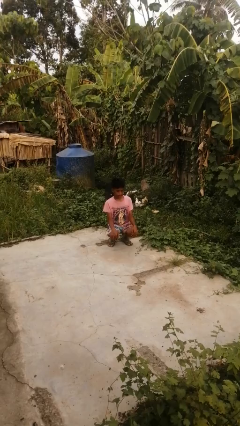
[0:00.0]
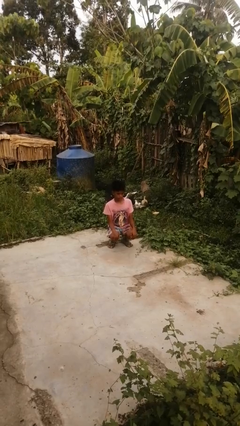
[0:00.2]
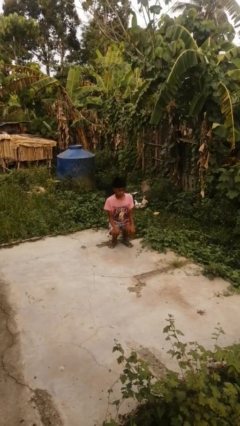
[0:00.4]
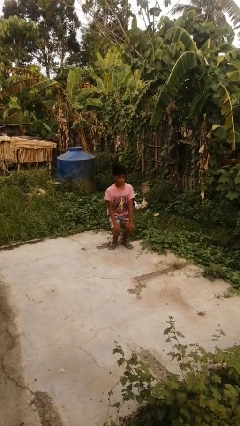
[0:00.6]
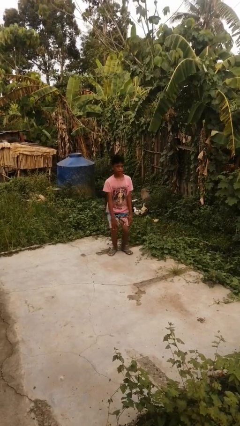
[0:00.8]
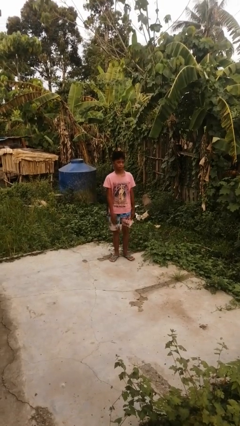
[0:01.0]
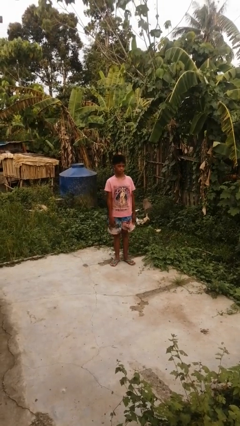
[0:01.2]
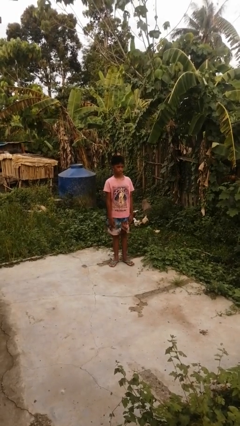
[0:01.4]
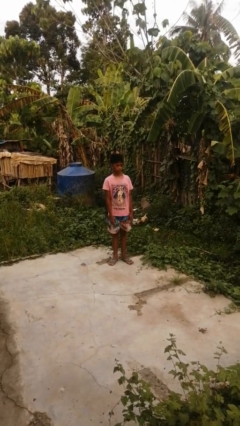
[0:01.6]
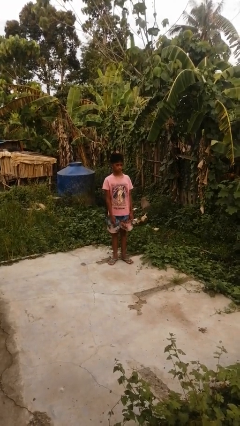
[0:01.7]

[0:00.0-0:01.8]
person stands up

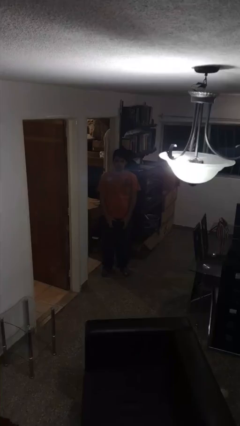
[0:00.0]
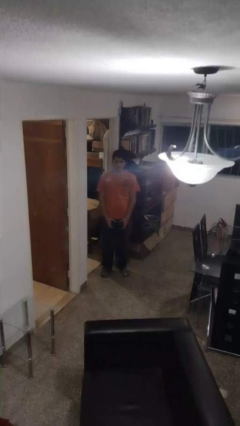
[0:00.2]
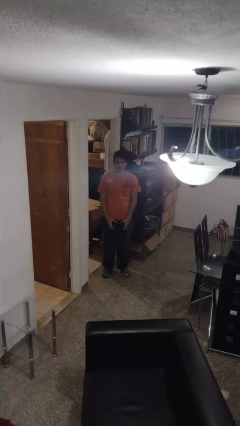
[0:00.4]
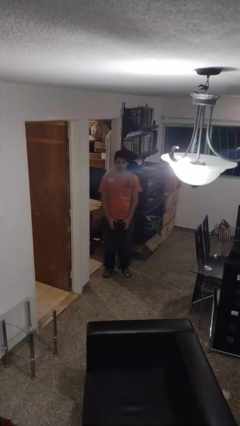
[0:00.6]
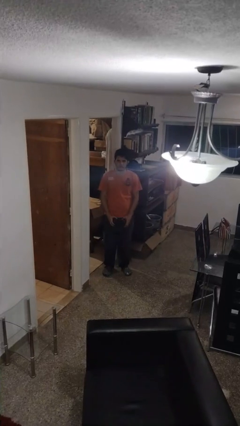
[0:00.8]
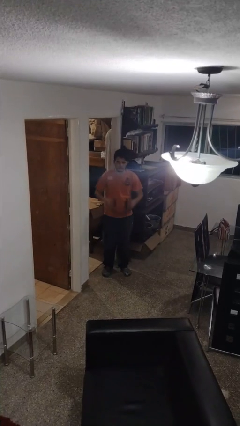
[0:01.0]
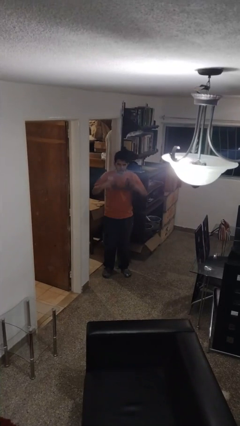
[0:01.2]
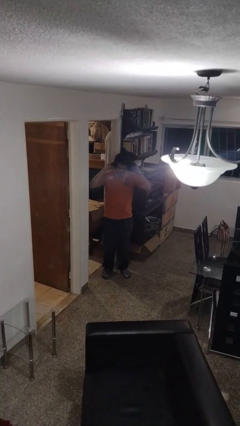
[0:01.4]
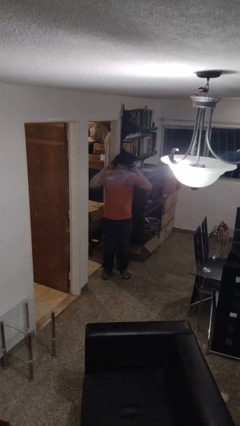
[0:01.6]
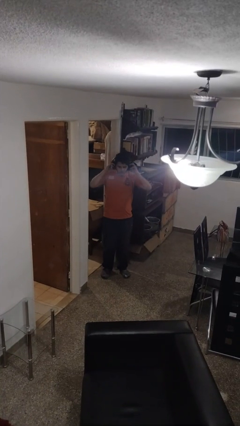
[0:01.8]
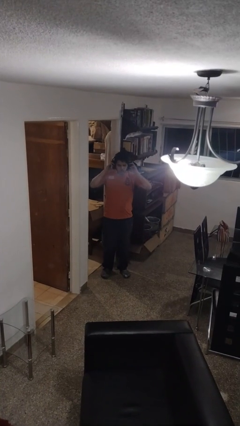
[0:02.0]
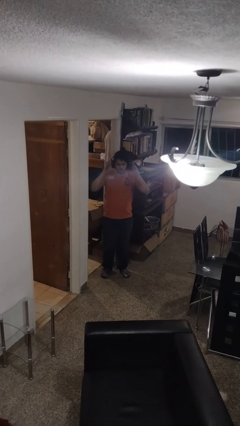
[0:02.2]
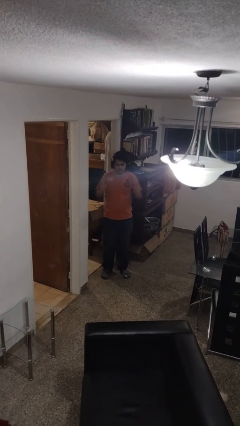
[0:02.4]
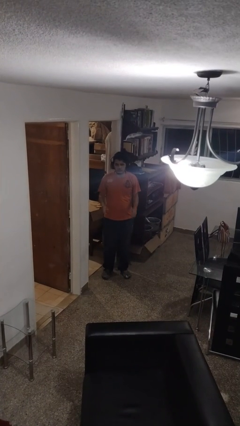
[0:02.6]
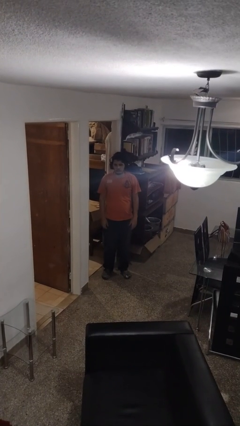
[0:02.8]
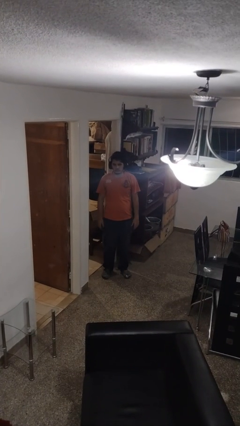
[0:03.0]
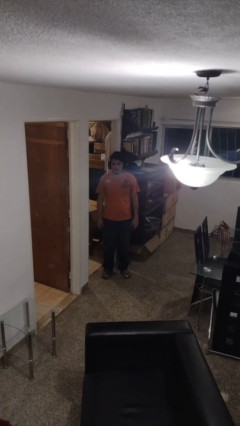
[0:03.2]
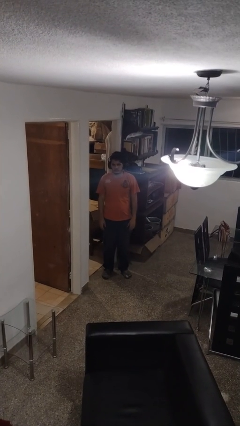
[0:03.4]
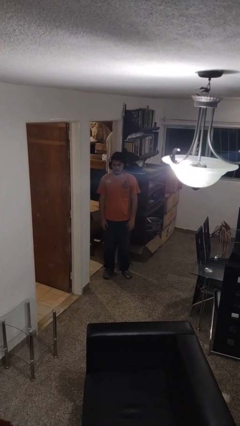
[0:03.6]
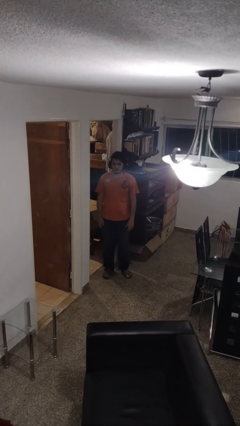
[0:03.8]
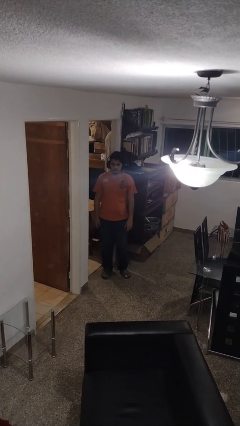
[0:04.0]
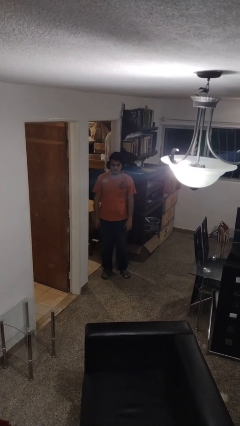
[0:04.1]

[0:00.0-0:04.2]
person puts on headphones

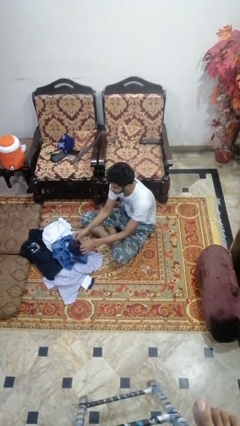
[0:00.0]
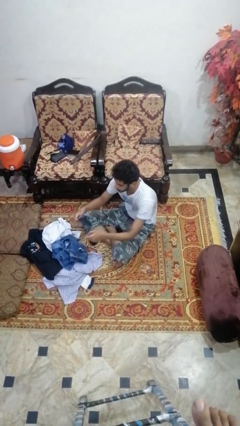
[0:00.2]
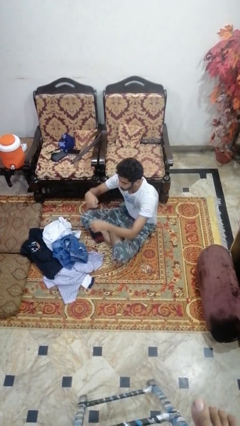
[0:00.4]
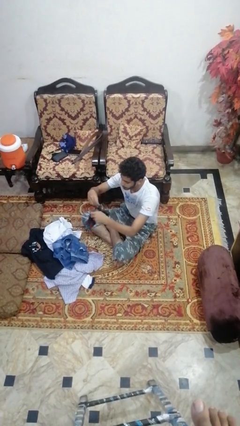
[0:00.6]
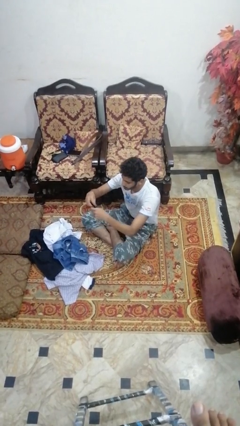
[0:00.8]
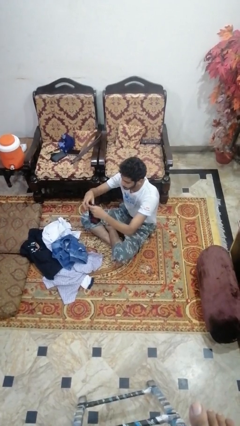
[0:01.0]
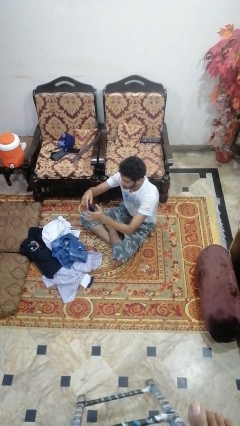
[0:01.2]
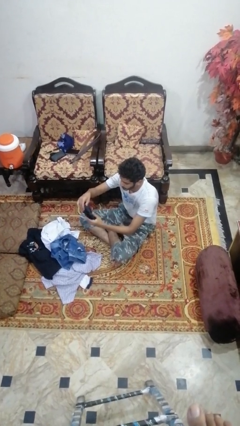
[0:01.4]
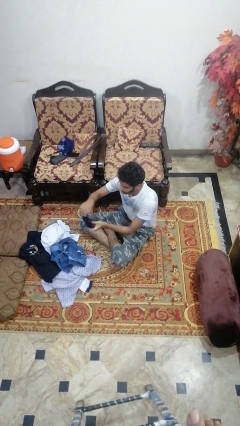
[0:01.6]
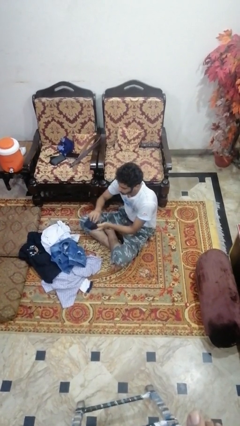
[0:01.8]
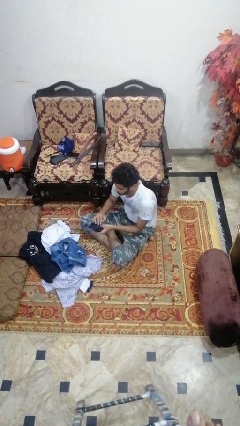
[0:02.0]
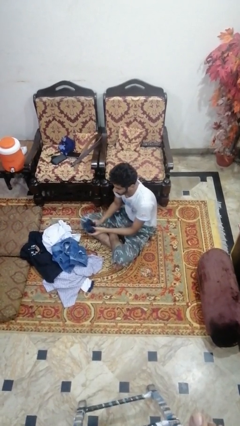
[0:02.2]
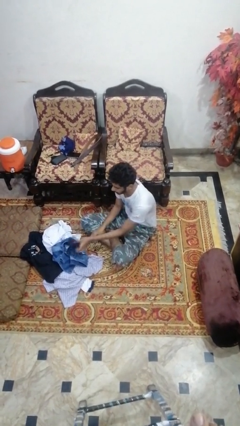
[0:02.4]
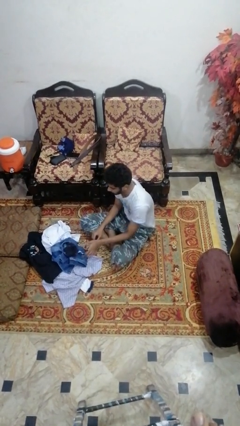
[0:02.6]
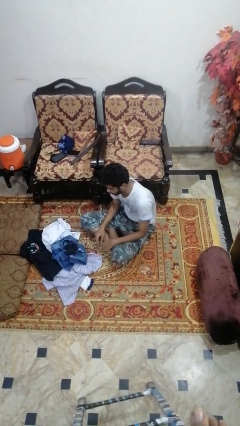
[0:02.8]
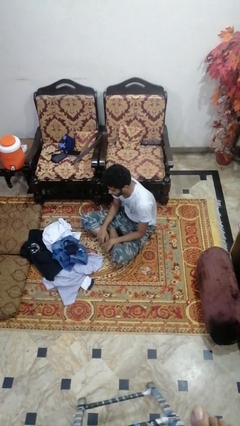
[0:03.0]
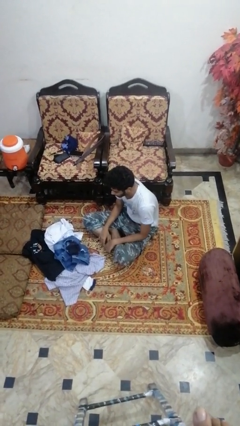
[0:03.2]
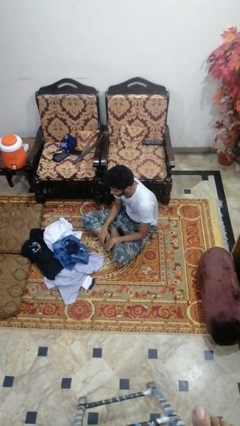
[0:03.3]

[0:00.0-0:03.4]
person folds socks

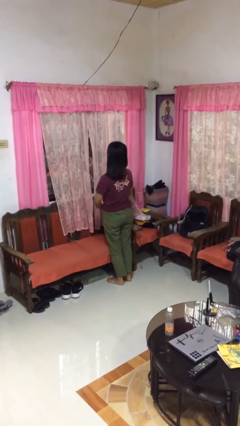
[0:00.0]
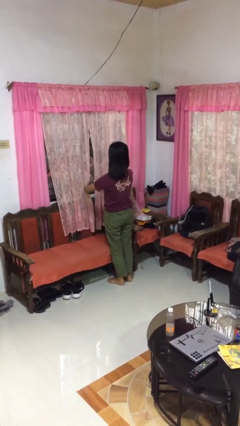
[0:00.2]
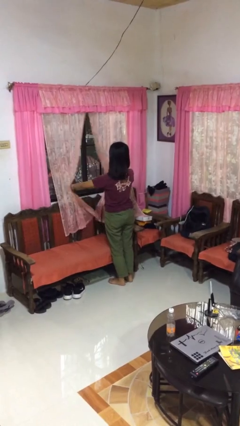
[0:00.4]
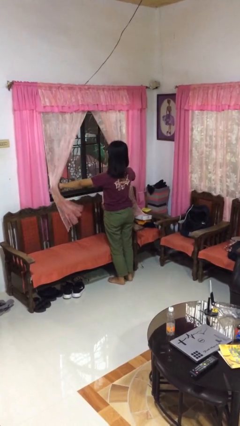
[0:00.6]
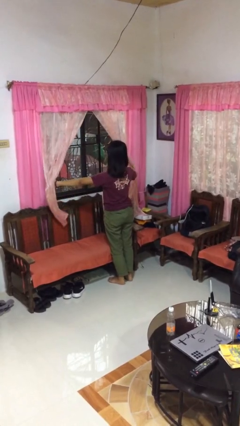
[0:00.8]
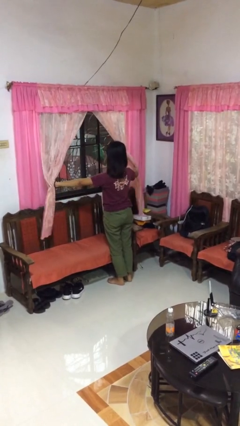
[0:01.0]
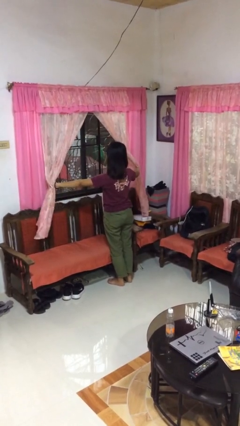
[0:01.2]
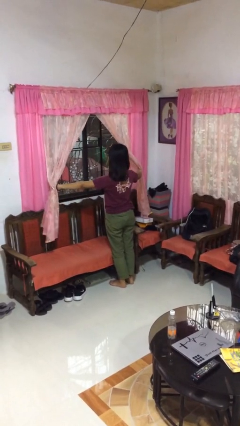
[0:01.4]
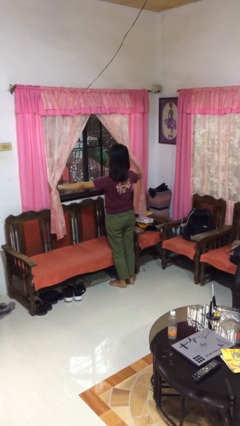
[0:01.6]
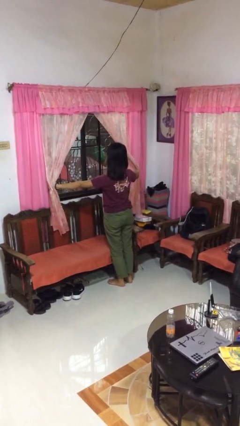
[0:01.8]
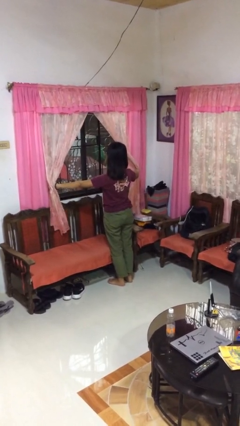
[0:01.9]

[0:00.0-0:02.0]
person opens curtains

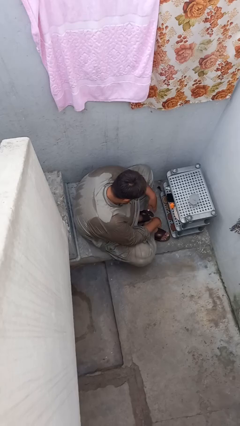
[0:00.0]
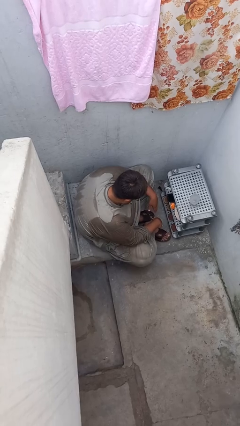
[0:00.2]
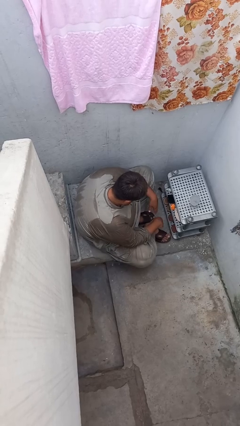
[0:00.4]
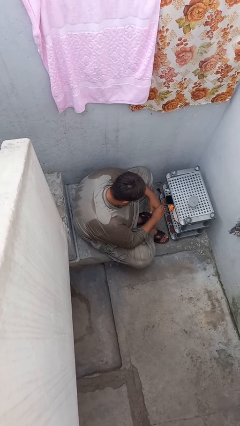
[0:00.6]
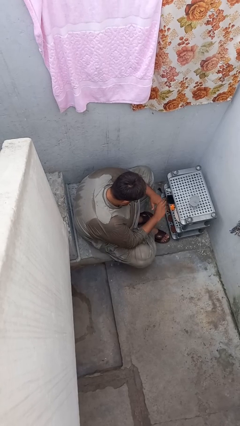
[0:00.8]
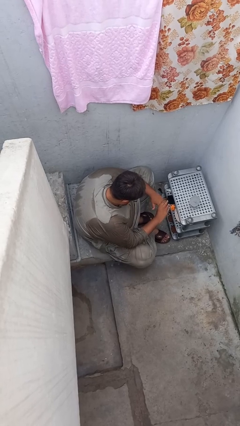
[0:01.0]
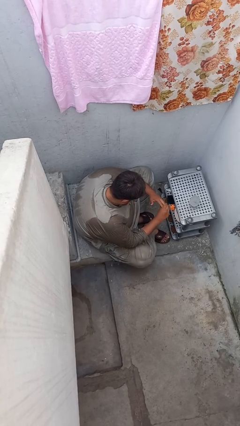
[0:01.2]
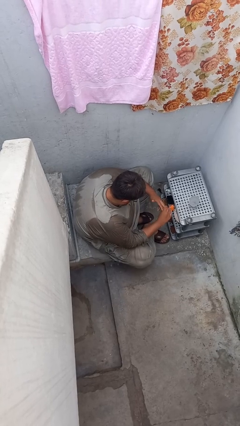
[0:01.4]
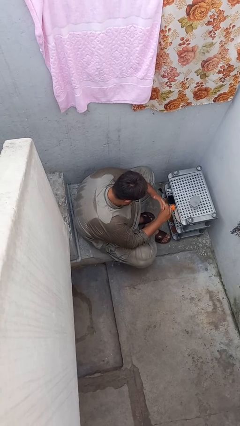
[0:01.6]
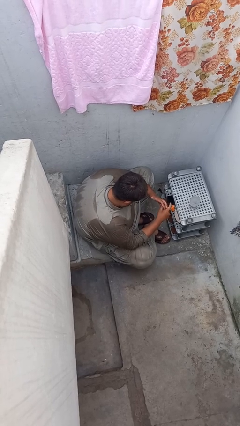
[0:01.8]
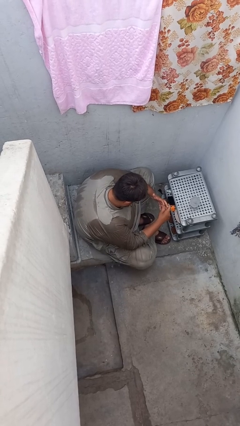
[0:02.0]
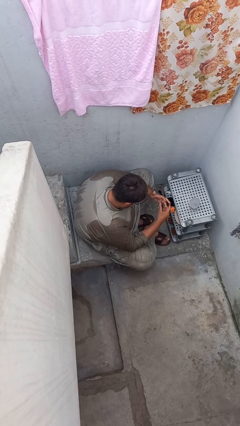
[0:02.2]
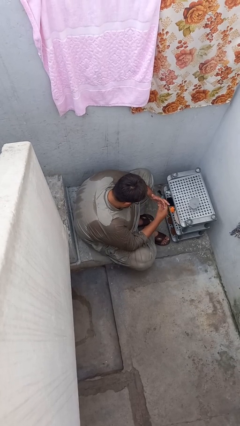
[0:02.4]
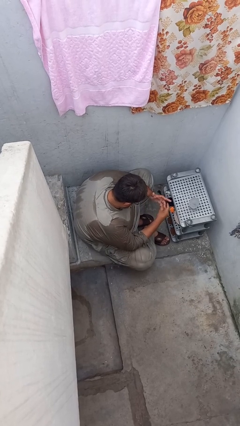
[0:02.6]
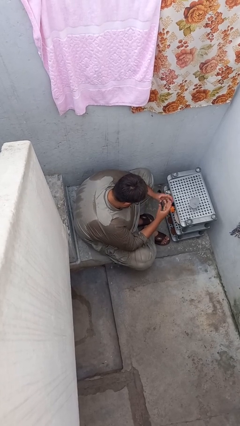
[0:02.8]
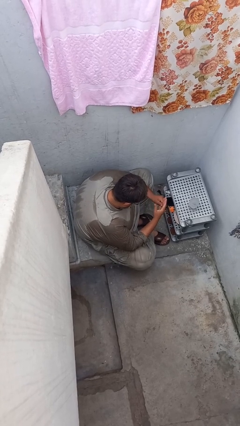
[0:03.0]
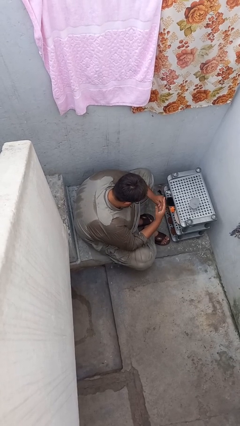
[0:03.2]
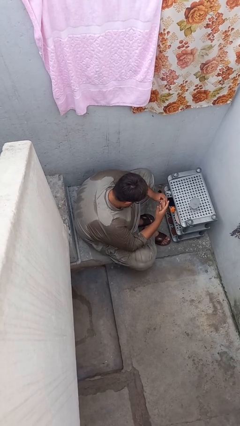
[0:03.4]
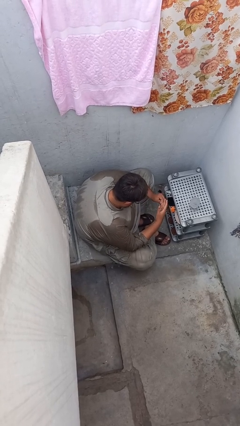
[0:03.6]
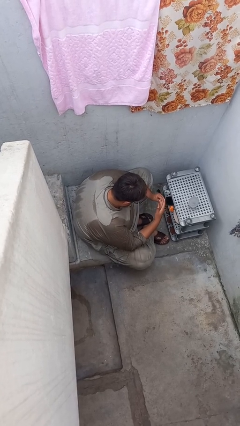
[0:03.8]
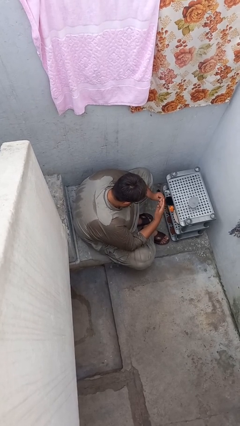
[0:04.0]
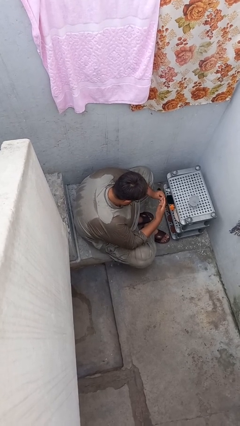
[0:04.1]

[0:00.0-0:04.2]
person snaps fingers

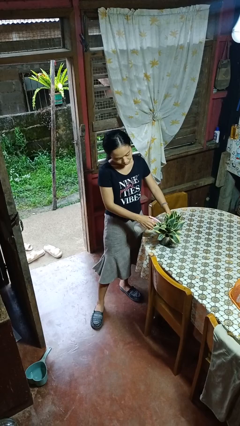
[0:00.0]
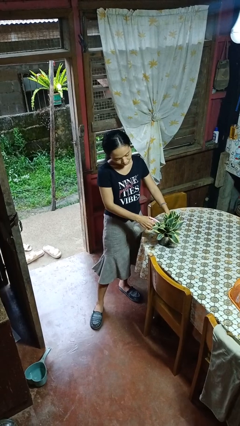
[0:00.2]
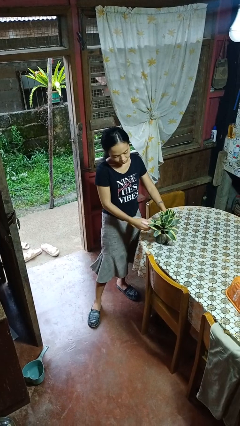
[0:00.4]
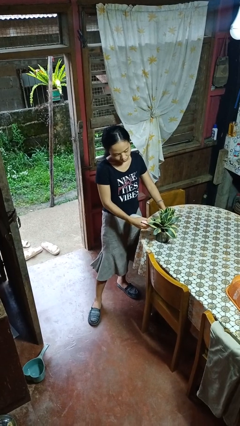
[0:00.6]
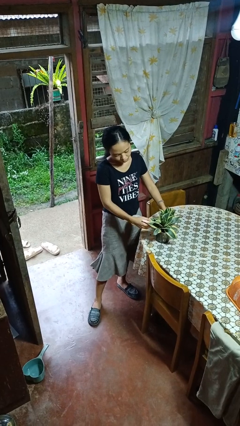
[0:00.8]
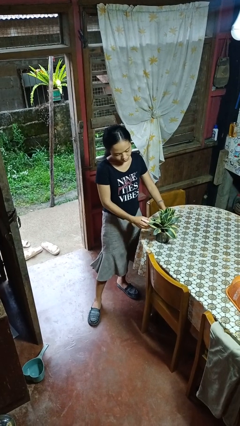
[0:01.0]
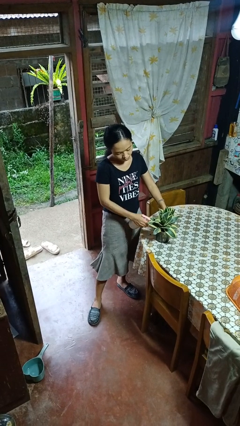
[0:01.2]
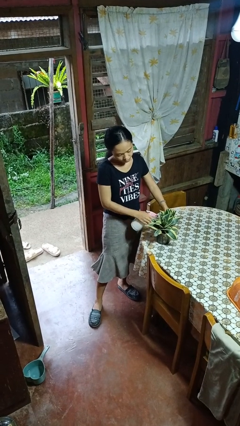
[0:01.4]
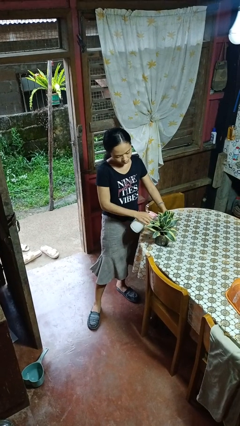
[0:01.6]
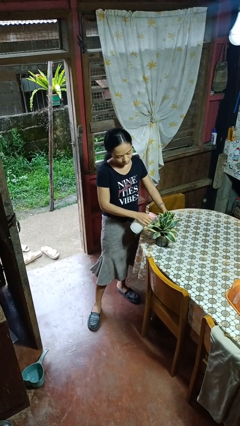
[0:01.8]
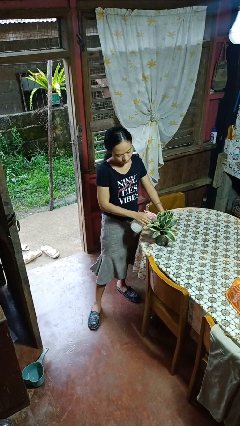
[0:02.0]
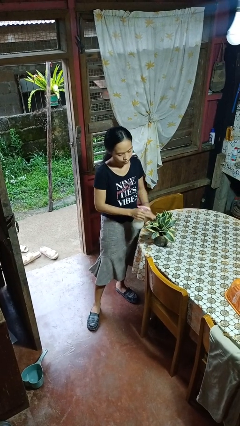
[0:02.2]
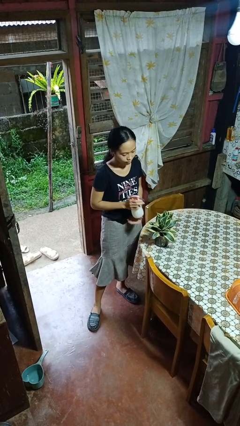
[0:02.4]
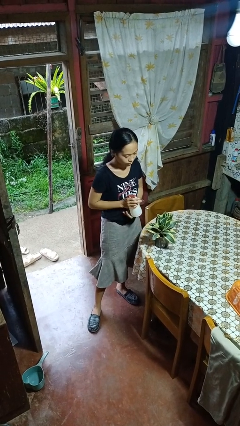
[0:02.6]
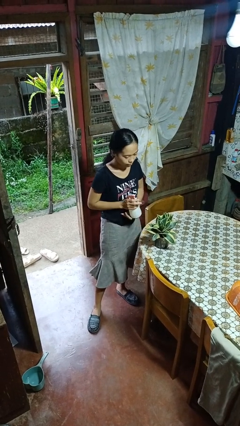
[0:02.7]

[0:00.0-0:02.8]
person waters houseplant
